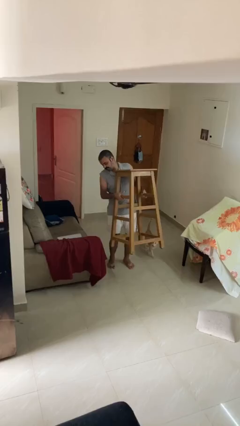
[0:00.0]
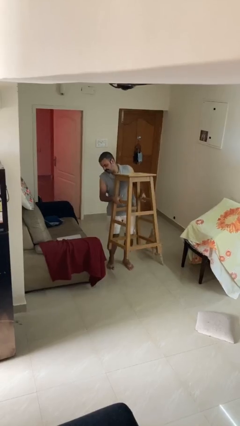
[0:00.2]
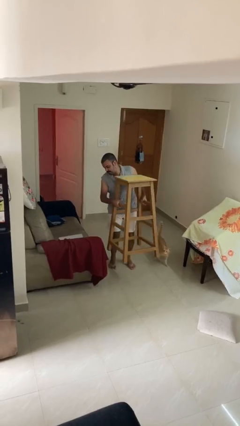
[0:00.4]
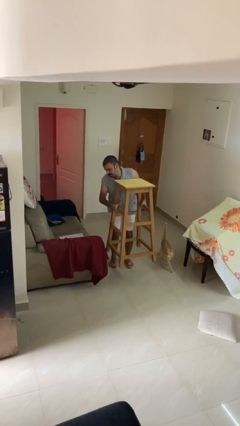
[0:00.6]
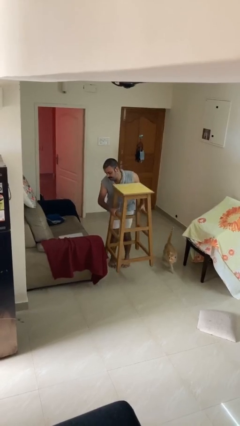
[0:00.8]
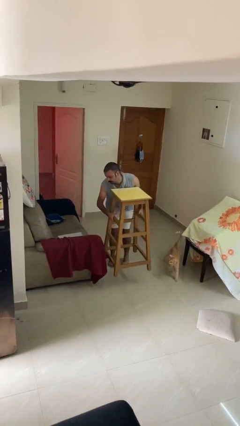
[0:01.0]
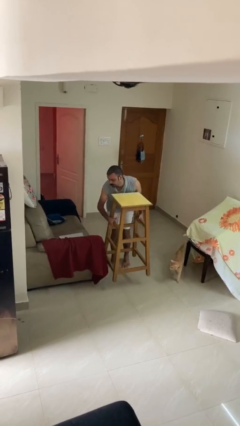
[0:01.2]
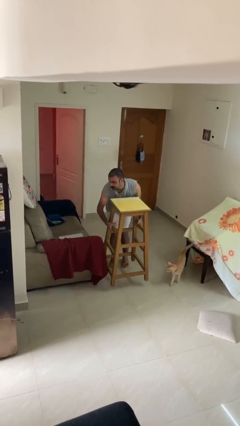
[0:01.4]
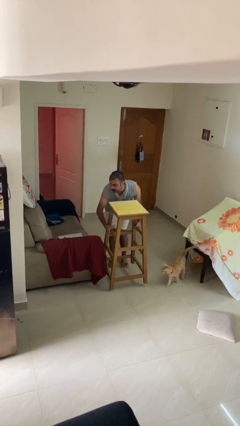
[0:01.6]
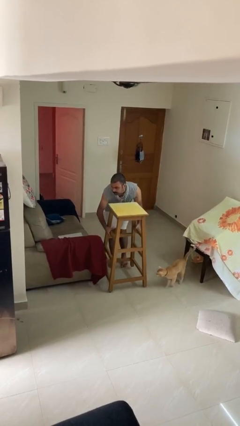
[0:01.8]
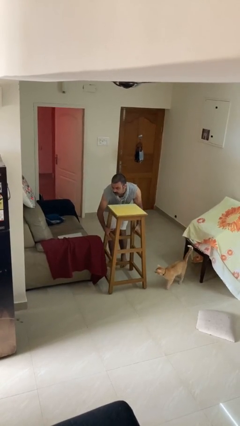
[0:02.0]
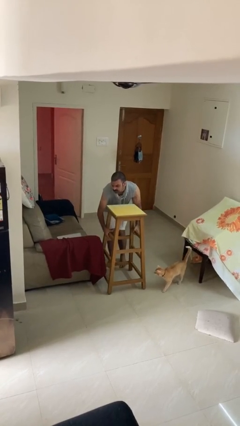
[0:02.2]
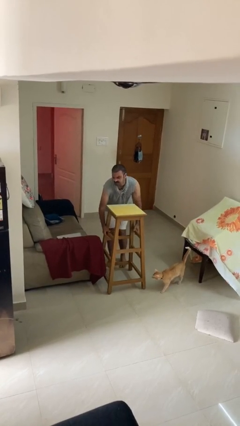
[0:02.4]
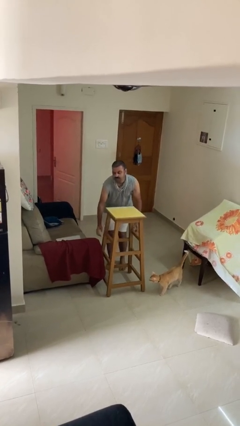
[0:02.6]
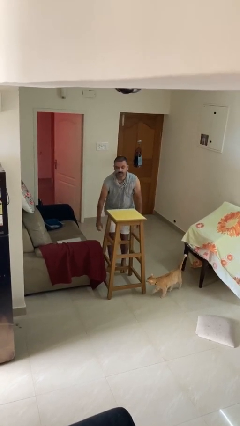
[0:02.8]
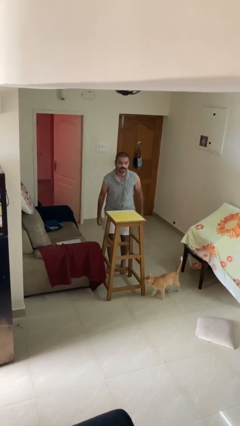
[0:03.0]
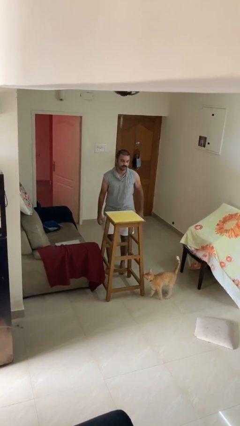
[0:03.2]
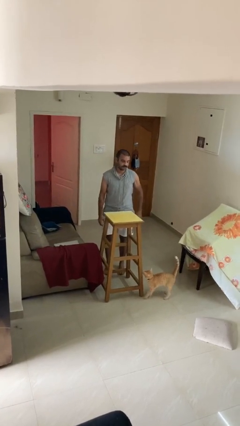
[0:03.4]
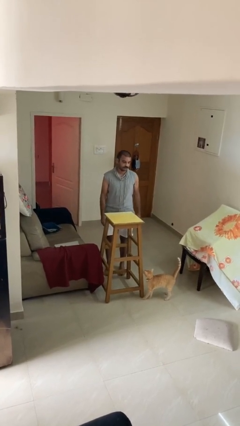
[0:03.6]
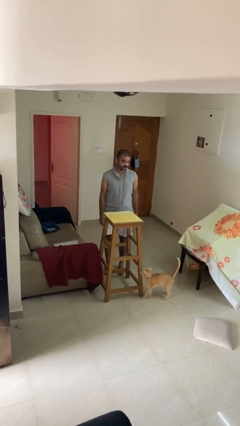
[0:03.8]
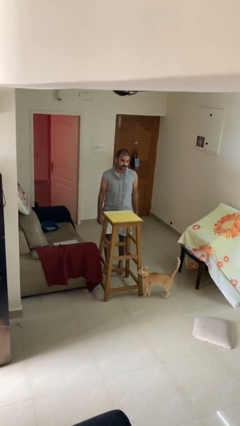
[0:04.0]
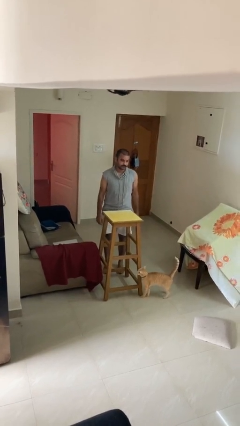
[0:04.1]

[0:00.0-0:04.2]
person puts down object on floor

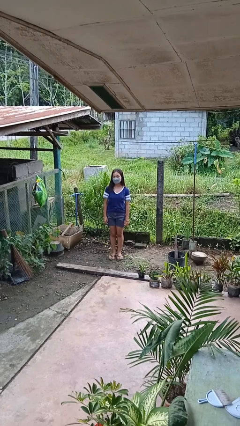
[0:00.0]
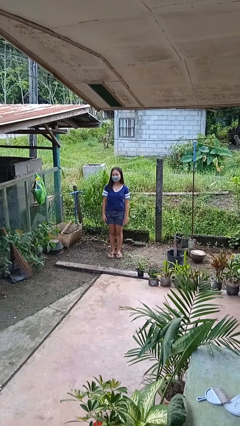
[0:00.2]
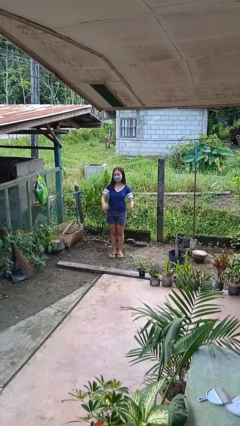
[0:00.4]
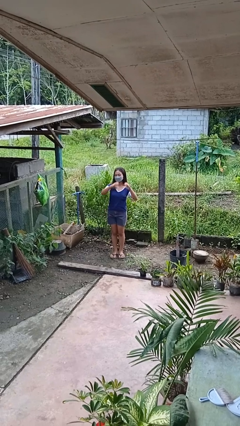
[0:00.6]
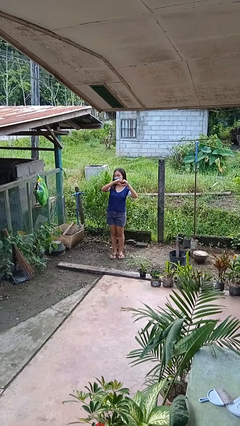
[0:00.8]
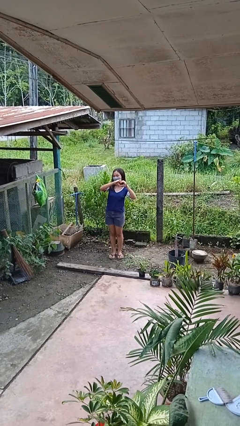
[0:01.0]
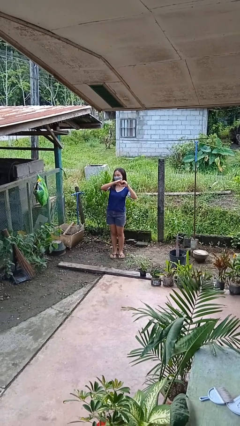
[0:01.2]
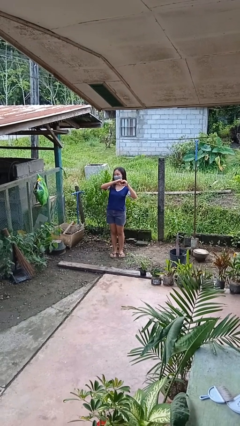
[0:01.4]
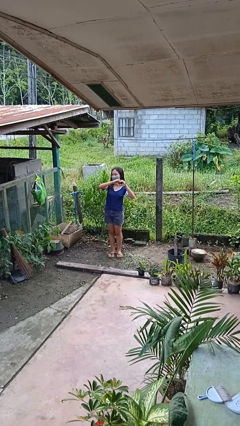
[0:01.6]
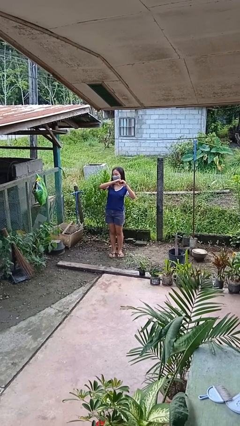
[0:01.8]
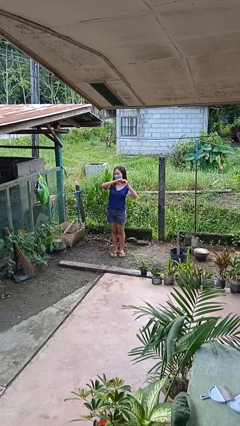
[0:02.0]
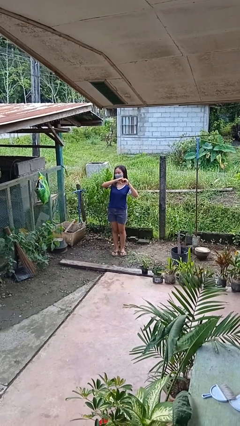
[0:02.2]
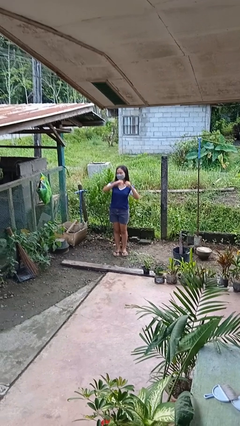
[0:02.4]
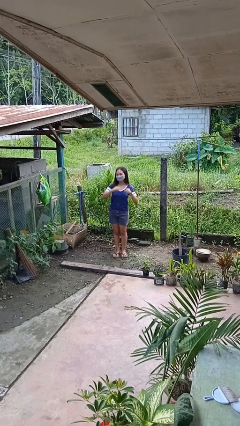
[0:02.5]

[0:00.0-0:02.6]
person gestures heart

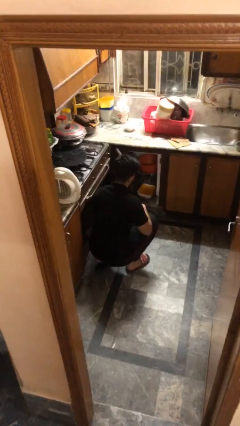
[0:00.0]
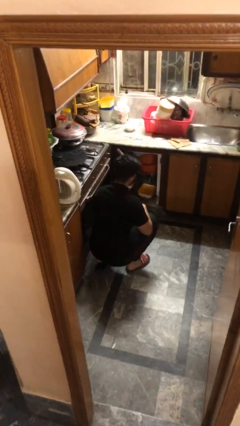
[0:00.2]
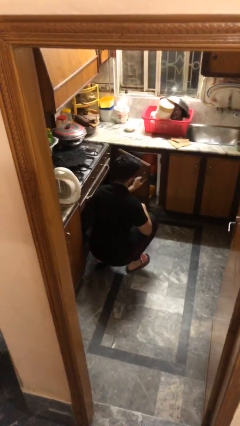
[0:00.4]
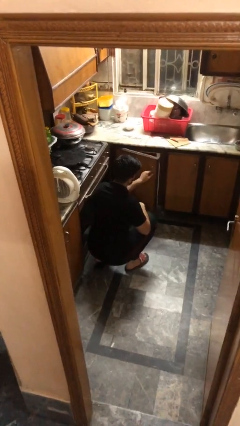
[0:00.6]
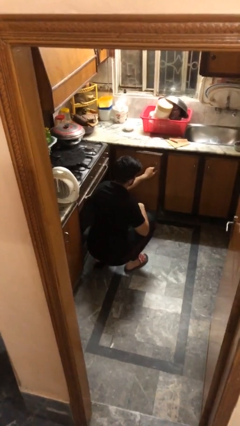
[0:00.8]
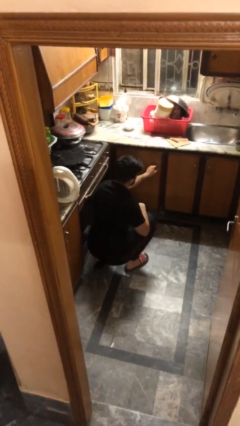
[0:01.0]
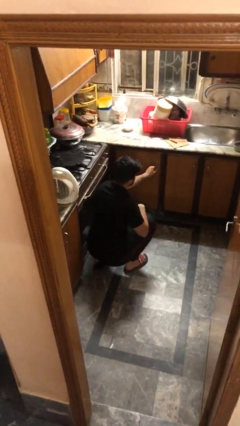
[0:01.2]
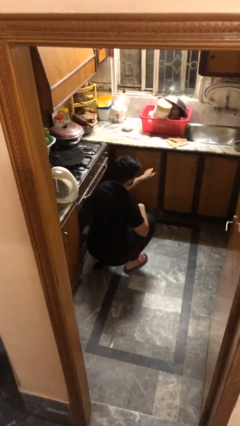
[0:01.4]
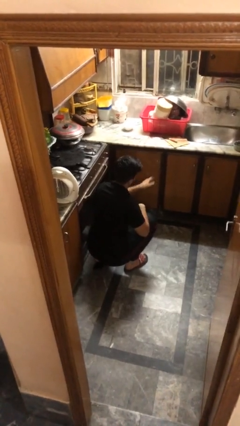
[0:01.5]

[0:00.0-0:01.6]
person closes kitchen drawer

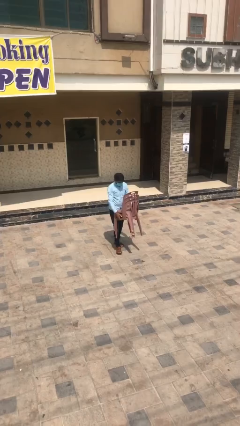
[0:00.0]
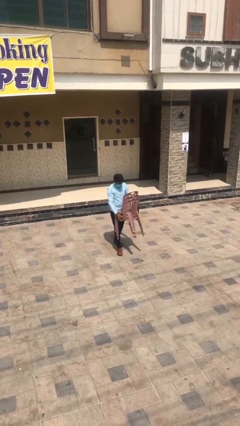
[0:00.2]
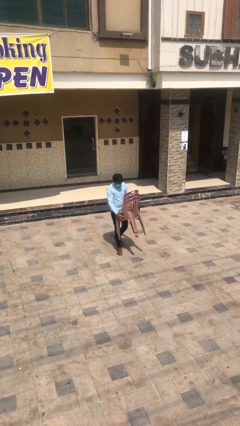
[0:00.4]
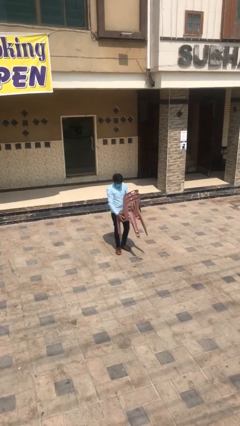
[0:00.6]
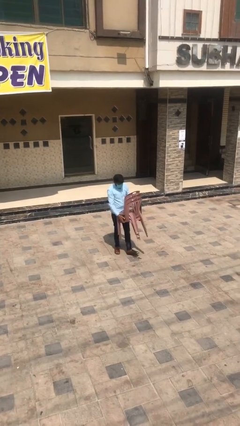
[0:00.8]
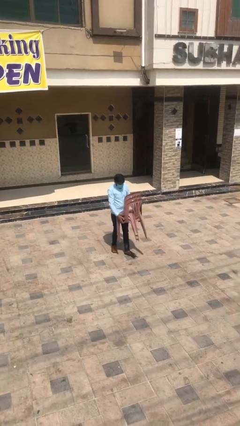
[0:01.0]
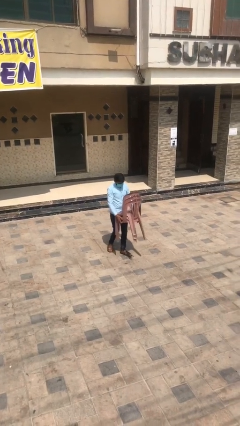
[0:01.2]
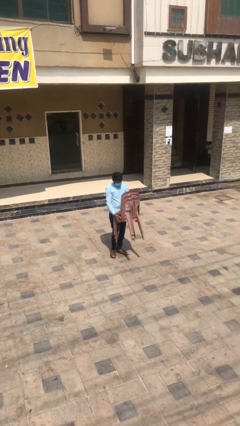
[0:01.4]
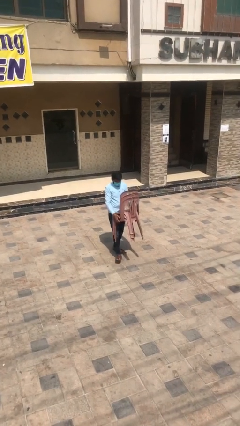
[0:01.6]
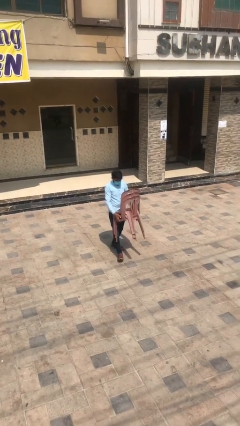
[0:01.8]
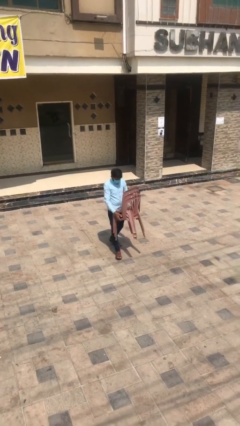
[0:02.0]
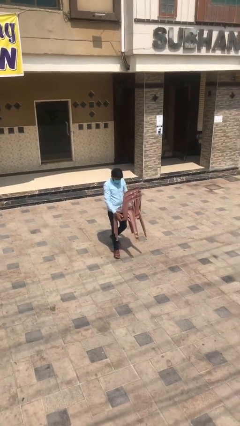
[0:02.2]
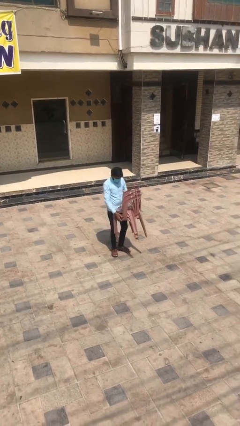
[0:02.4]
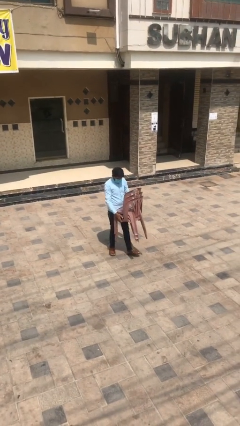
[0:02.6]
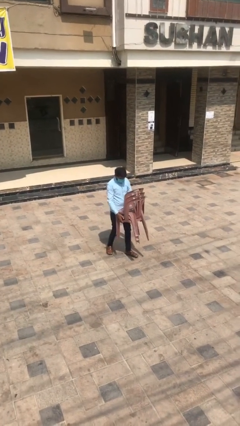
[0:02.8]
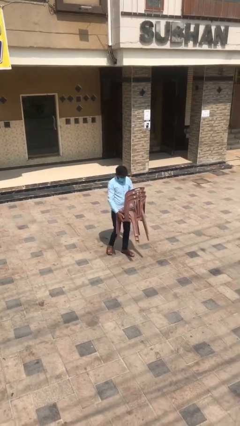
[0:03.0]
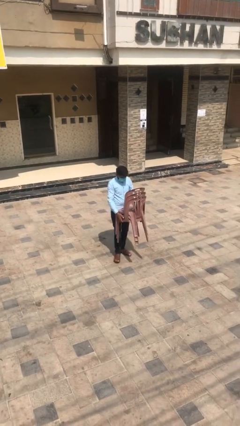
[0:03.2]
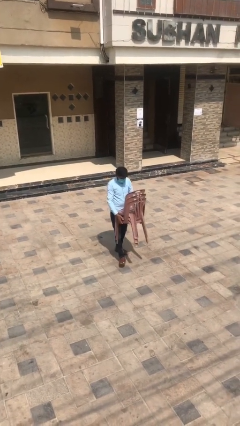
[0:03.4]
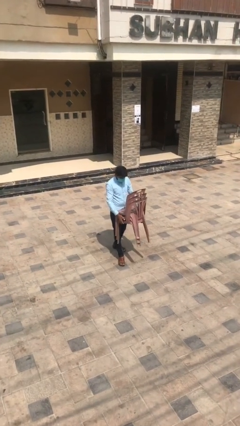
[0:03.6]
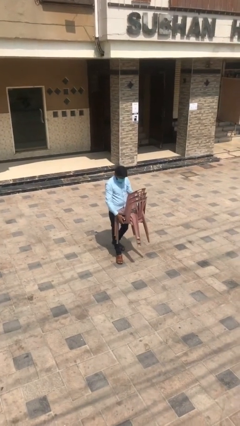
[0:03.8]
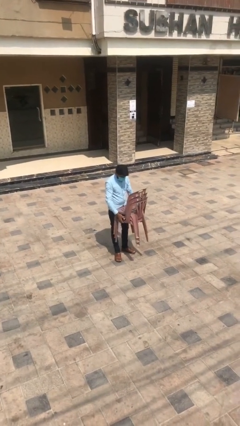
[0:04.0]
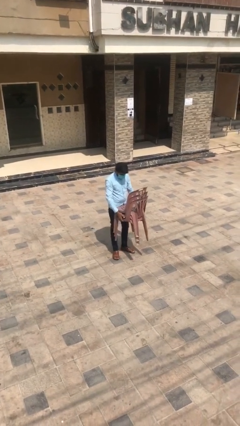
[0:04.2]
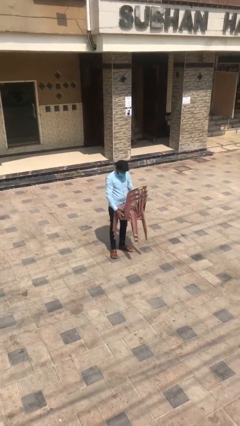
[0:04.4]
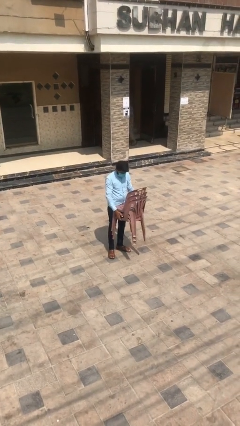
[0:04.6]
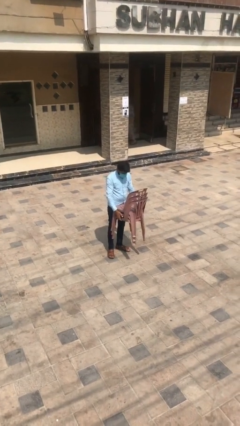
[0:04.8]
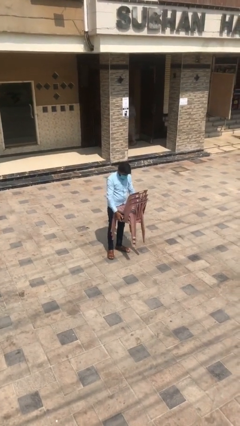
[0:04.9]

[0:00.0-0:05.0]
person carries heavy object

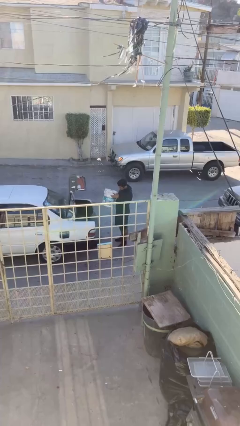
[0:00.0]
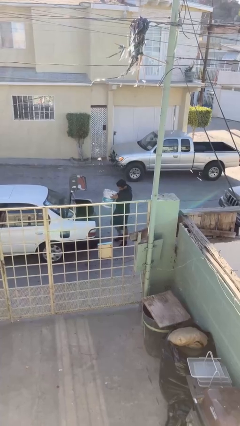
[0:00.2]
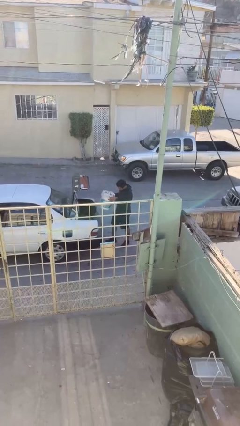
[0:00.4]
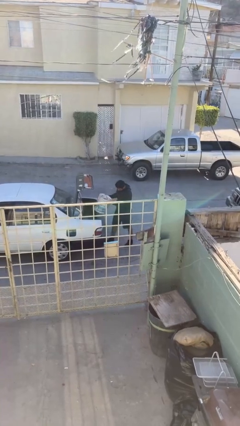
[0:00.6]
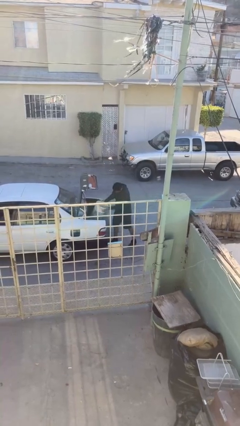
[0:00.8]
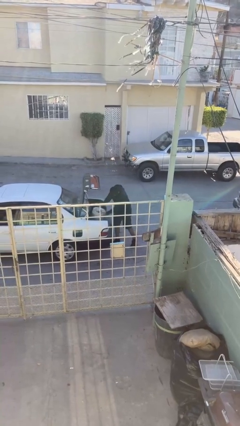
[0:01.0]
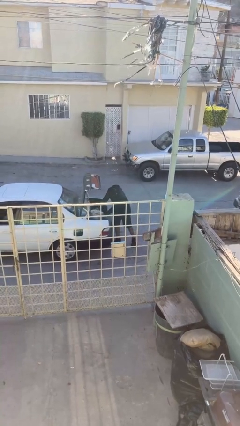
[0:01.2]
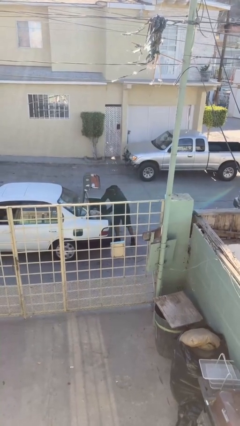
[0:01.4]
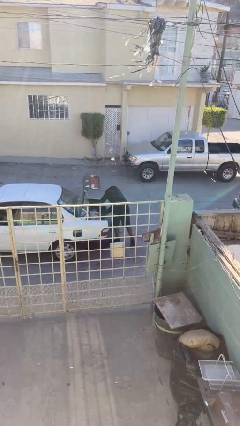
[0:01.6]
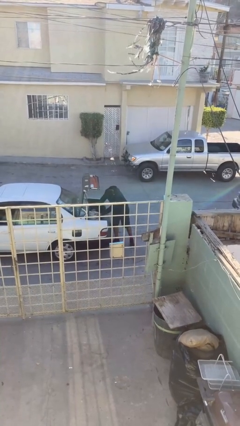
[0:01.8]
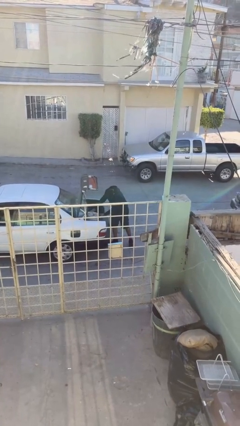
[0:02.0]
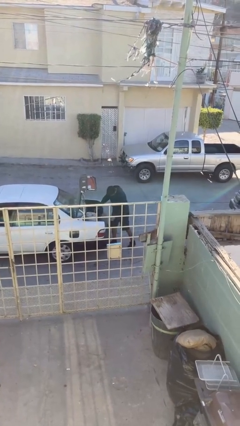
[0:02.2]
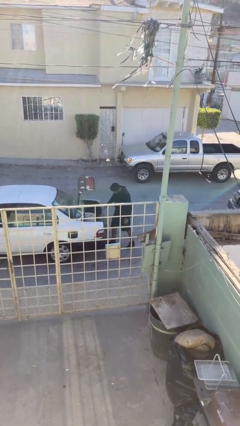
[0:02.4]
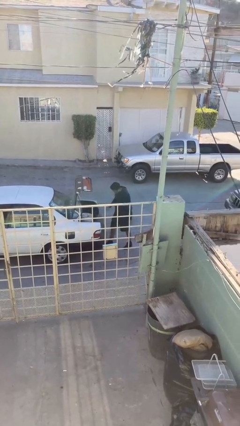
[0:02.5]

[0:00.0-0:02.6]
person loads car

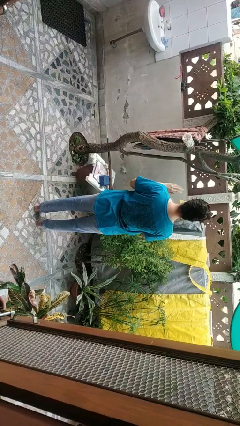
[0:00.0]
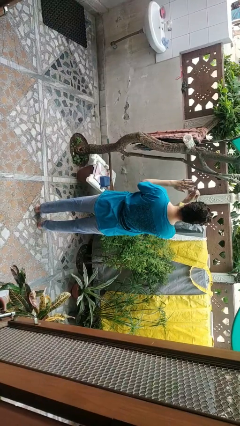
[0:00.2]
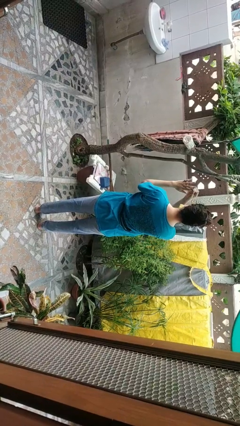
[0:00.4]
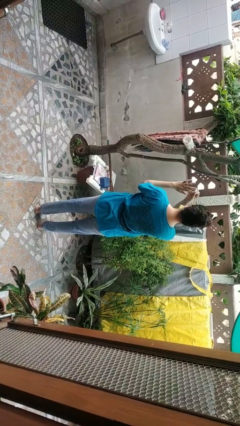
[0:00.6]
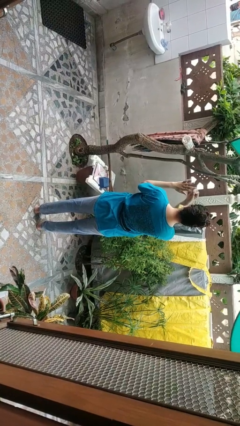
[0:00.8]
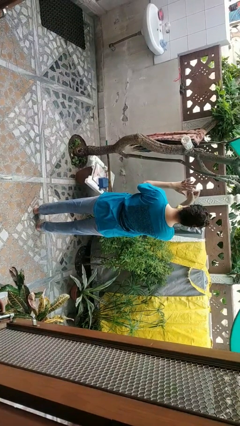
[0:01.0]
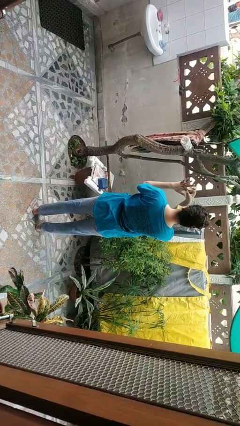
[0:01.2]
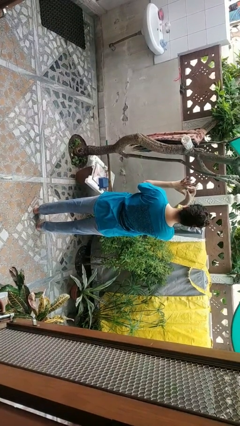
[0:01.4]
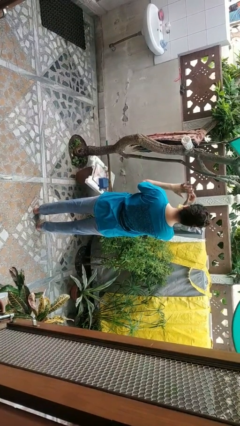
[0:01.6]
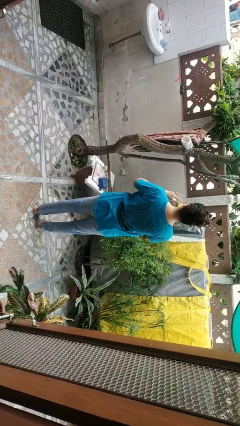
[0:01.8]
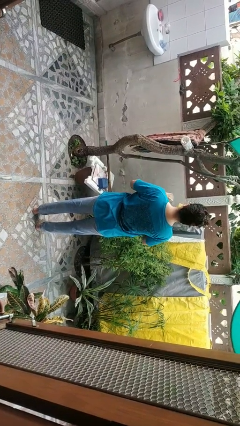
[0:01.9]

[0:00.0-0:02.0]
person puts on ring
